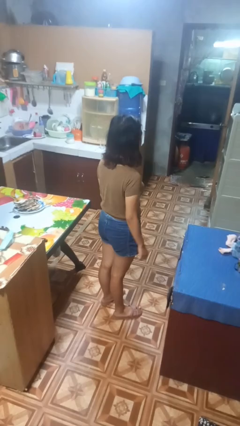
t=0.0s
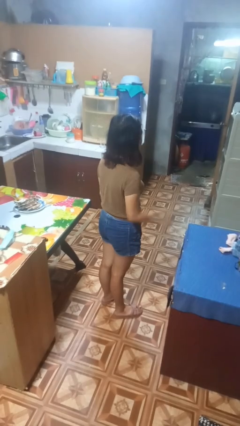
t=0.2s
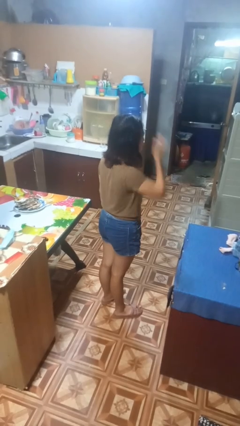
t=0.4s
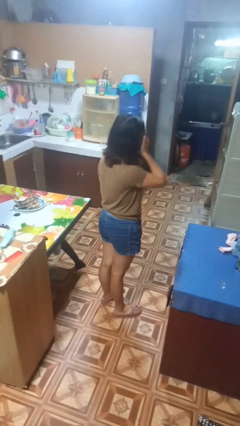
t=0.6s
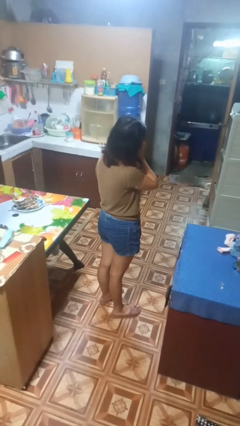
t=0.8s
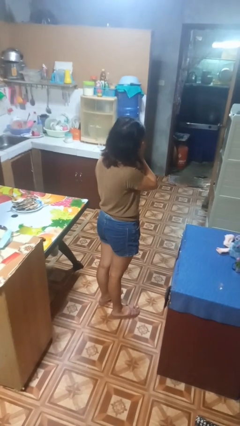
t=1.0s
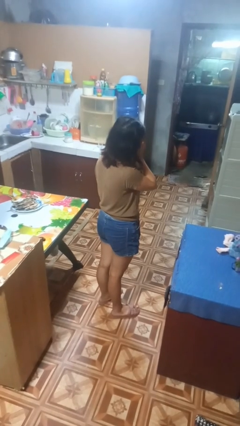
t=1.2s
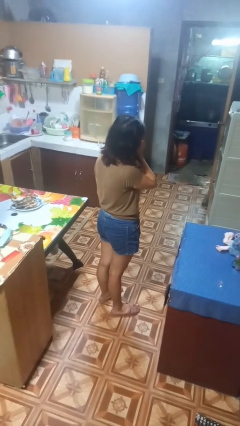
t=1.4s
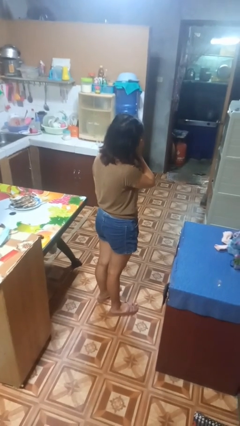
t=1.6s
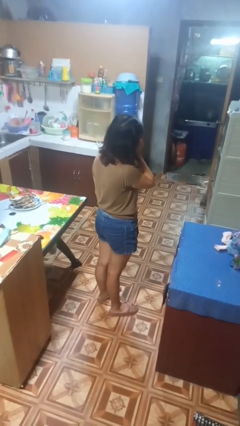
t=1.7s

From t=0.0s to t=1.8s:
person covers face with hands

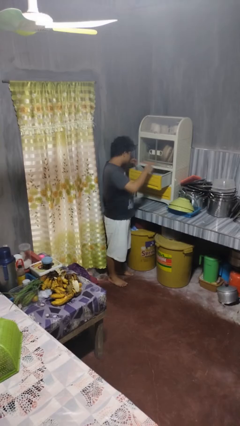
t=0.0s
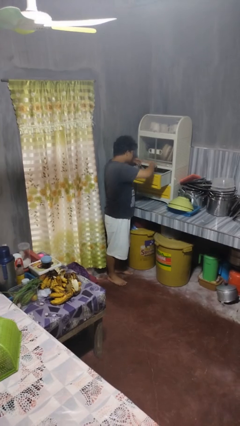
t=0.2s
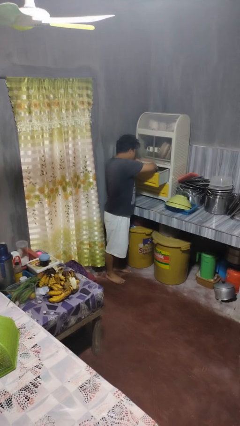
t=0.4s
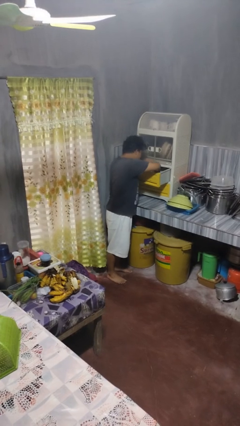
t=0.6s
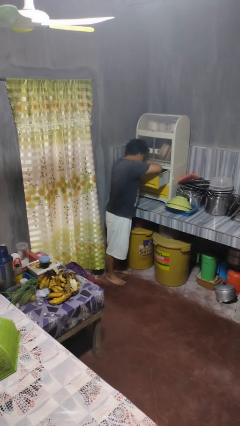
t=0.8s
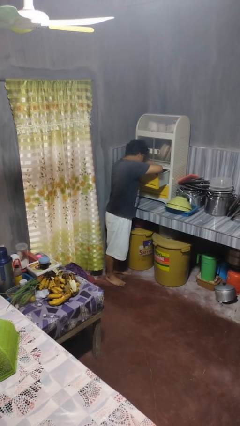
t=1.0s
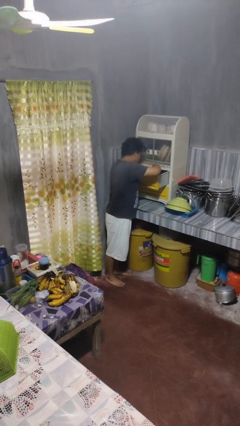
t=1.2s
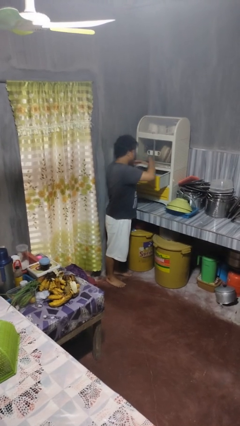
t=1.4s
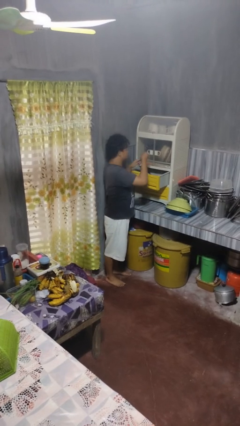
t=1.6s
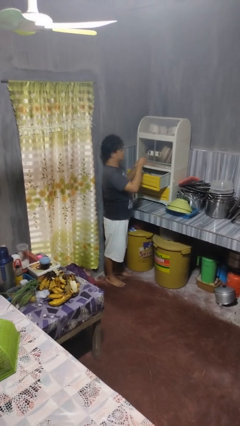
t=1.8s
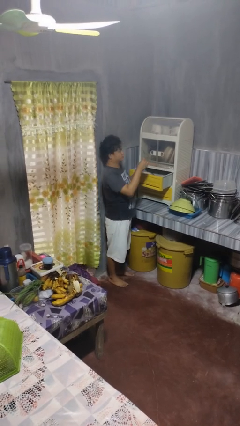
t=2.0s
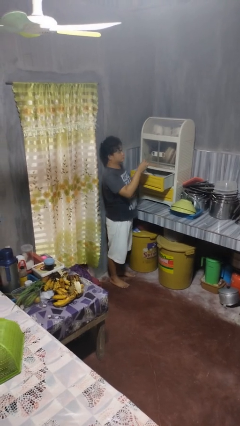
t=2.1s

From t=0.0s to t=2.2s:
person takes object from kitchen drawer

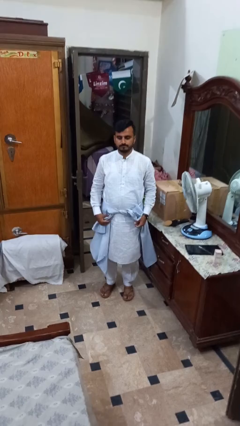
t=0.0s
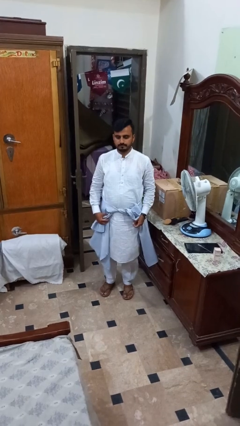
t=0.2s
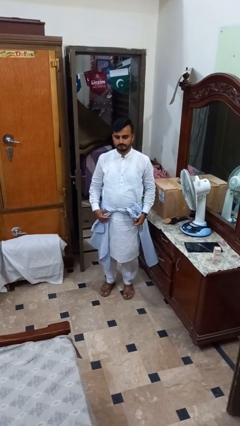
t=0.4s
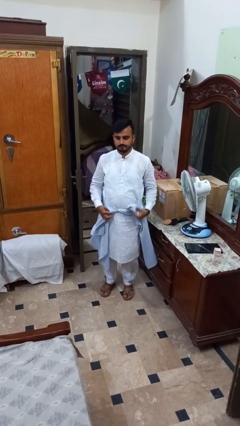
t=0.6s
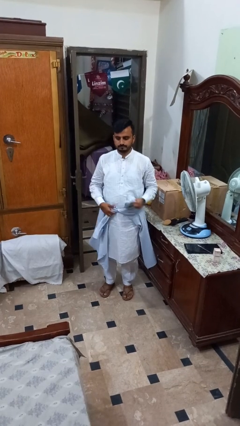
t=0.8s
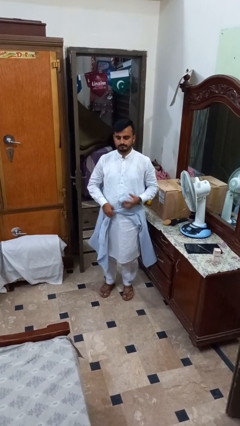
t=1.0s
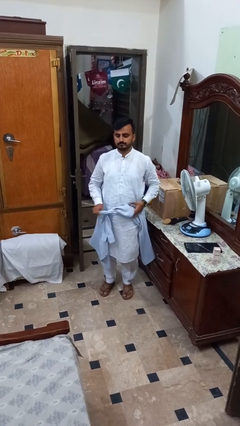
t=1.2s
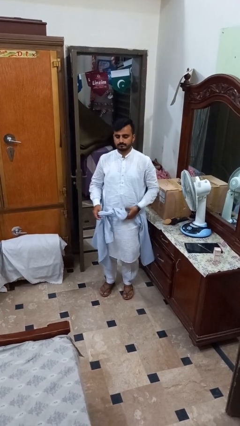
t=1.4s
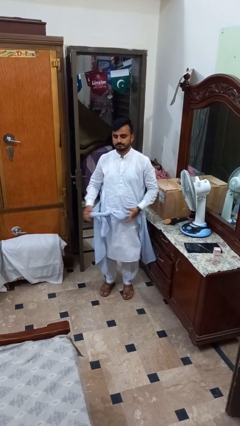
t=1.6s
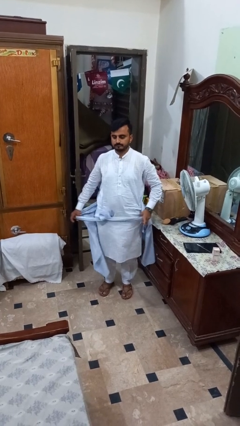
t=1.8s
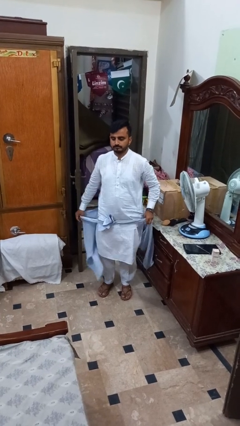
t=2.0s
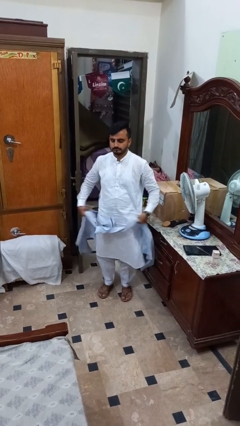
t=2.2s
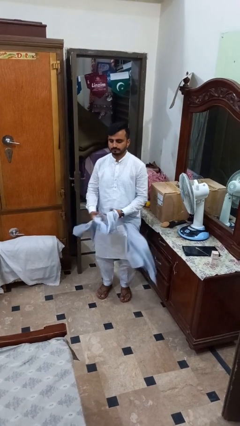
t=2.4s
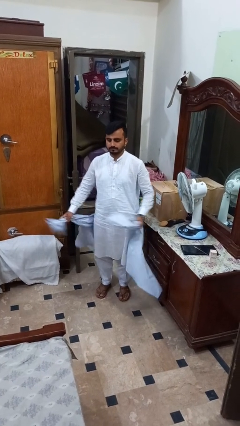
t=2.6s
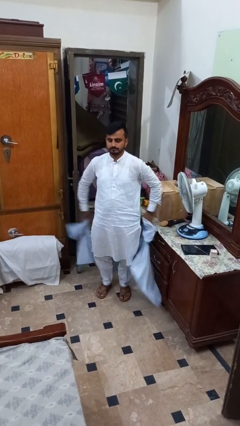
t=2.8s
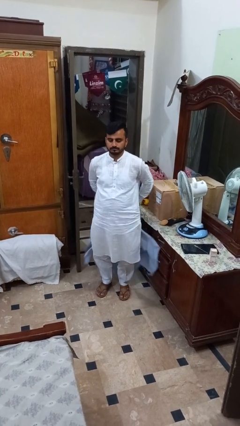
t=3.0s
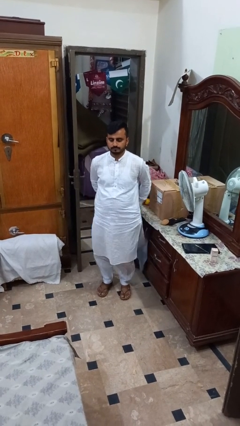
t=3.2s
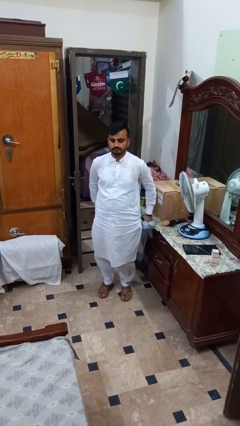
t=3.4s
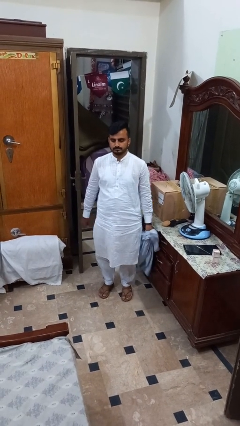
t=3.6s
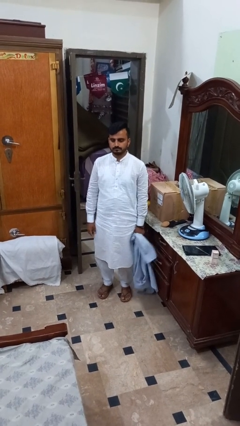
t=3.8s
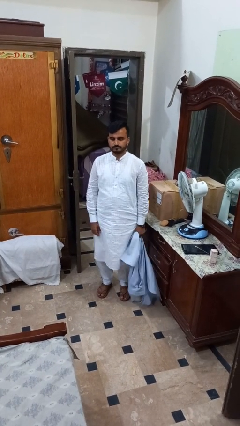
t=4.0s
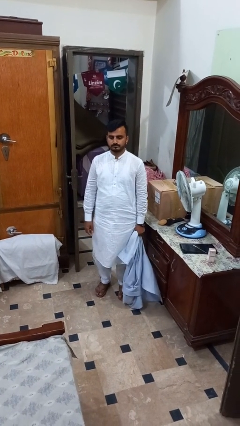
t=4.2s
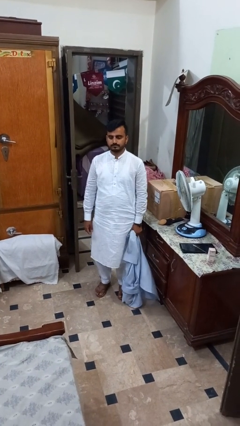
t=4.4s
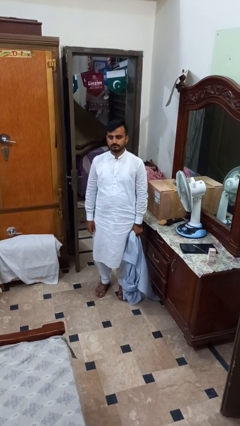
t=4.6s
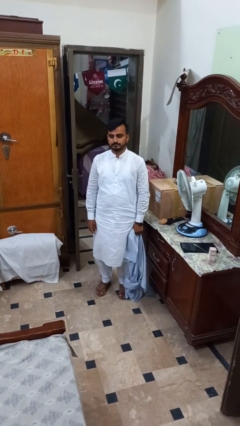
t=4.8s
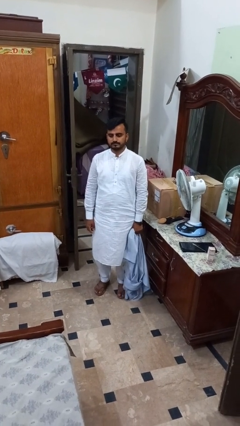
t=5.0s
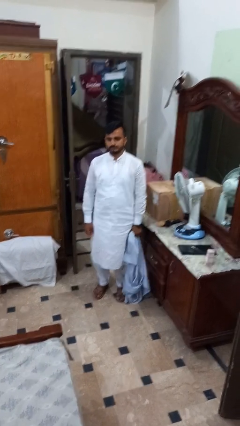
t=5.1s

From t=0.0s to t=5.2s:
person unties jacket around waist

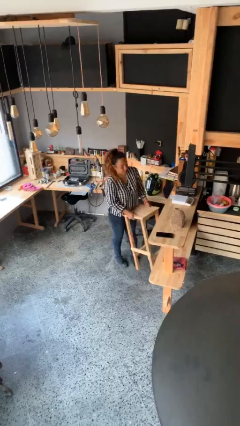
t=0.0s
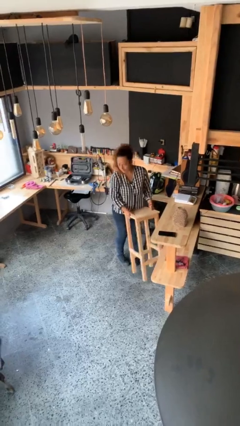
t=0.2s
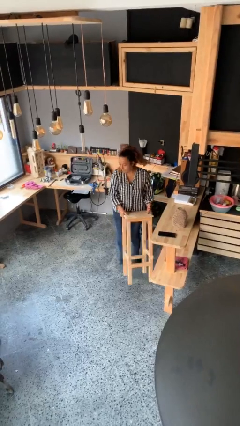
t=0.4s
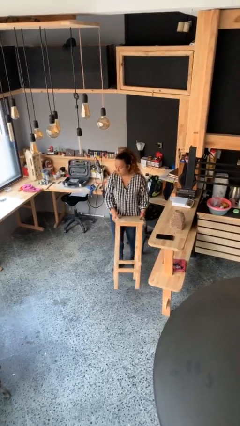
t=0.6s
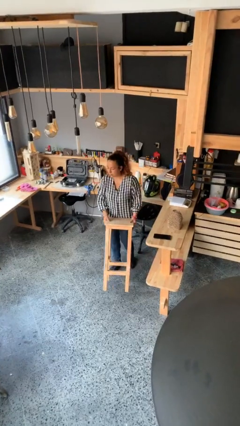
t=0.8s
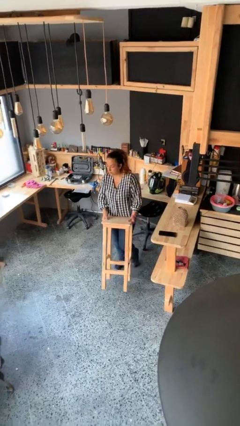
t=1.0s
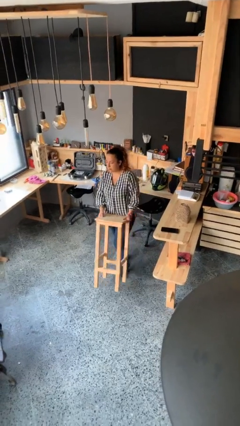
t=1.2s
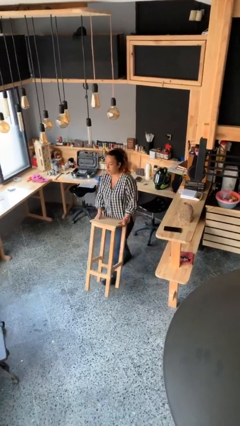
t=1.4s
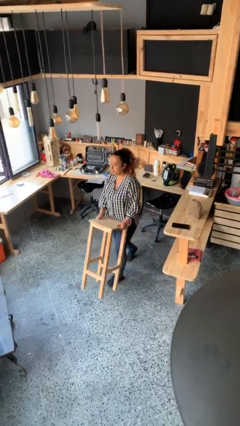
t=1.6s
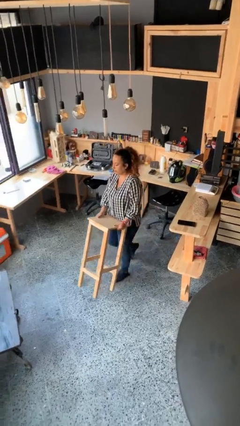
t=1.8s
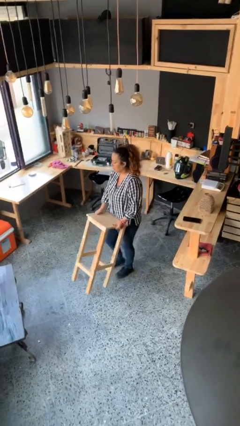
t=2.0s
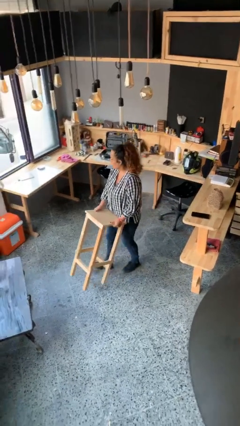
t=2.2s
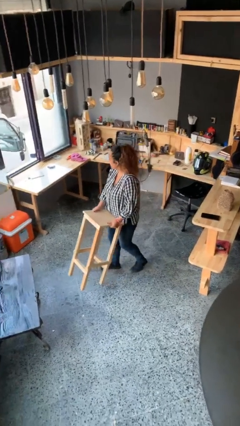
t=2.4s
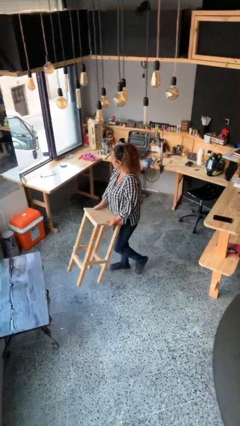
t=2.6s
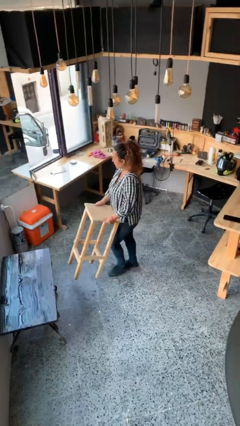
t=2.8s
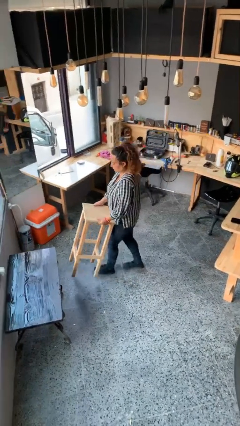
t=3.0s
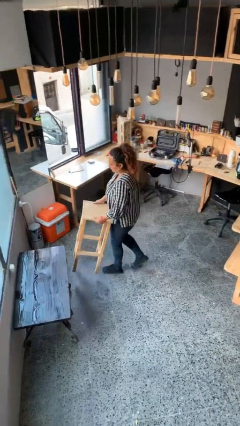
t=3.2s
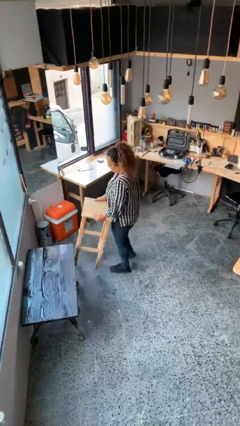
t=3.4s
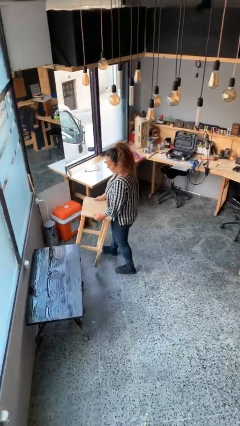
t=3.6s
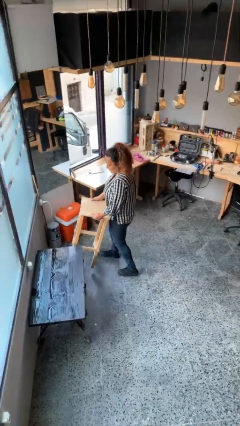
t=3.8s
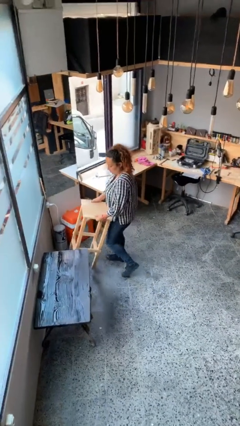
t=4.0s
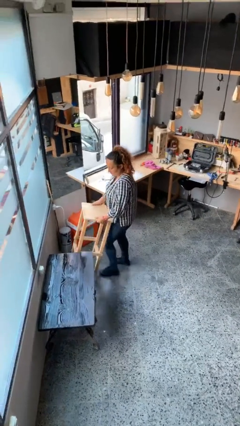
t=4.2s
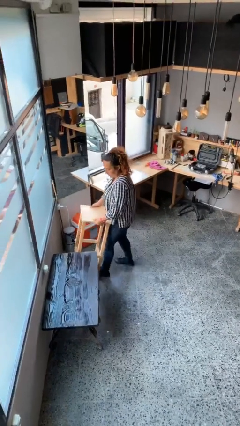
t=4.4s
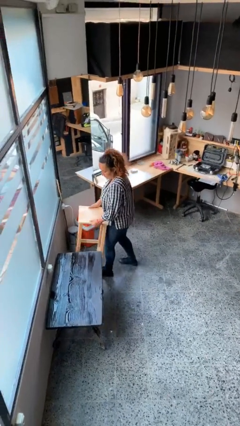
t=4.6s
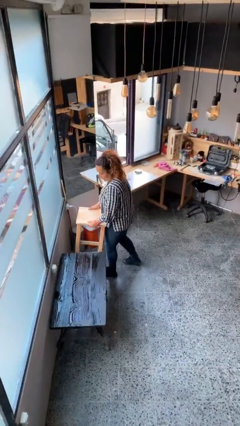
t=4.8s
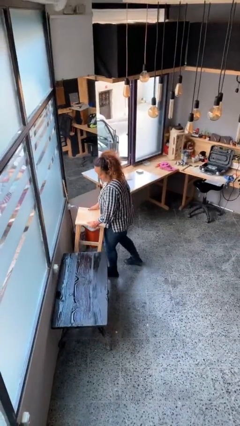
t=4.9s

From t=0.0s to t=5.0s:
person carries heavy object

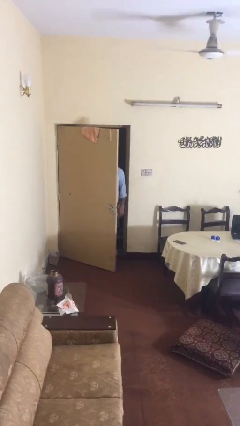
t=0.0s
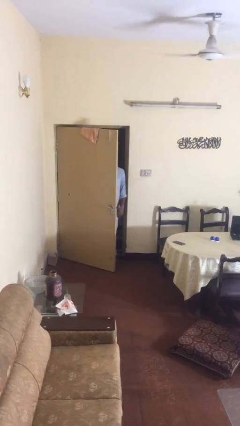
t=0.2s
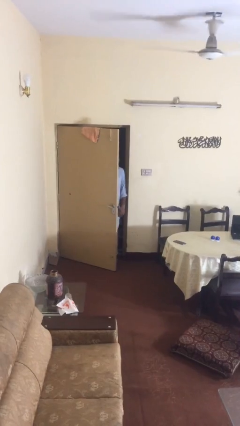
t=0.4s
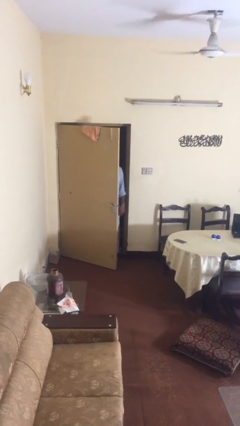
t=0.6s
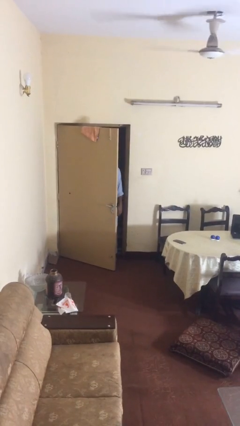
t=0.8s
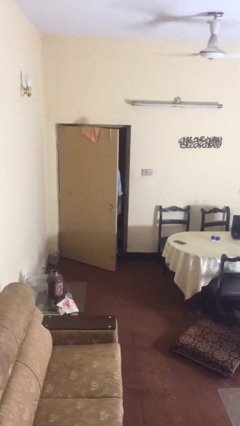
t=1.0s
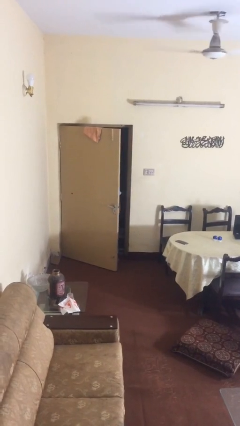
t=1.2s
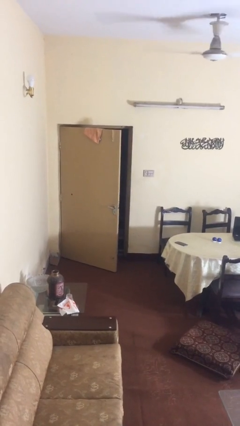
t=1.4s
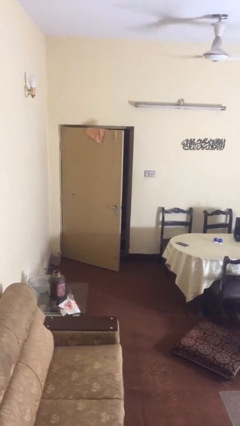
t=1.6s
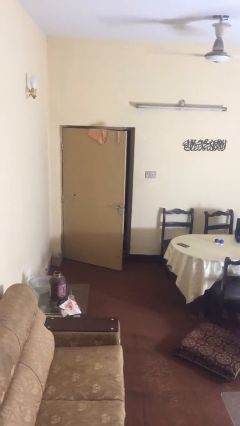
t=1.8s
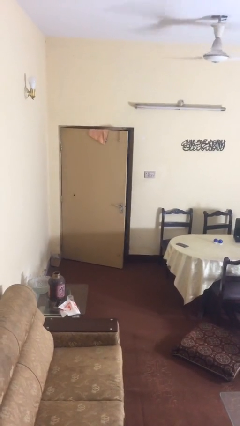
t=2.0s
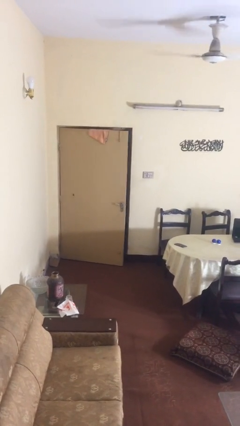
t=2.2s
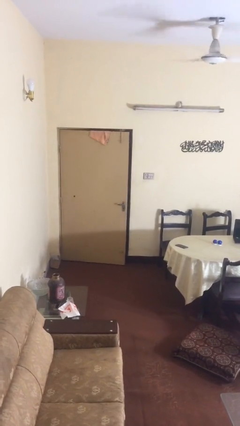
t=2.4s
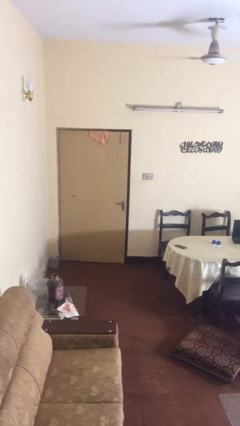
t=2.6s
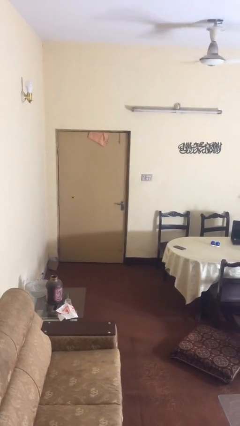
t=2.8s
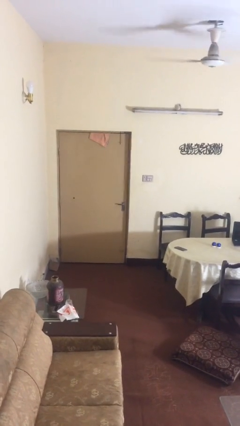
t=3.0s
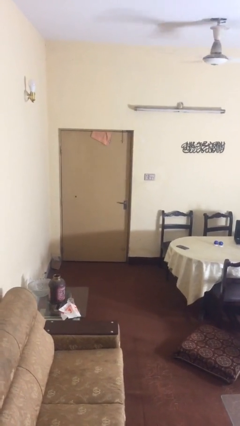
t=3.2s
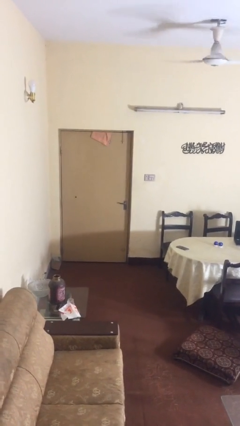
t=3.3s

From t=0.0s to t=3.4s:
person closes facility door

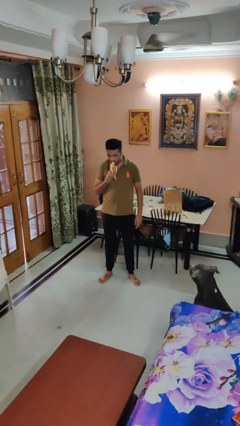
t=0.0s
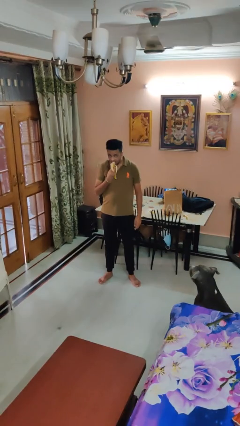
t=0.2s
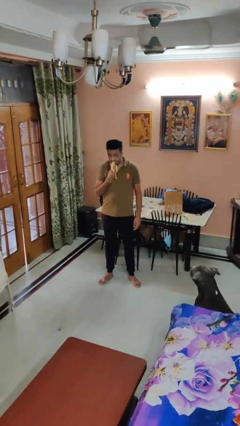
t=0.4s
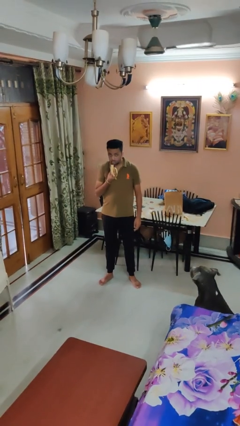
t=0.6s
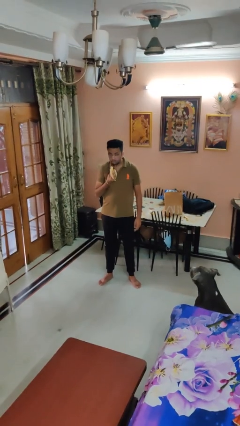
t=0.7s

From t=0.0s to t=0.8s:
person eats banana
